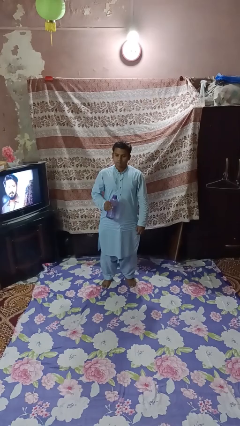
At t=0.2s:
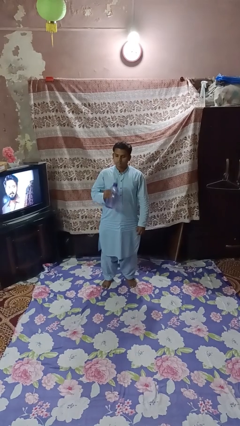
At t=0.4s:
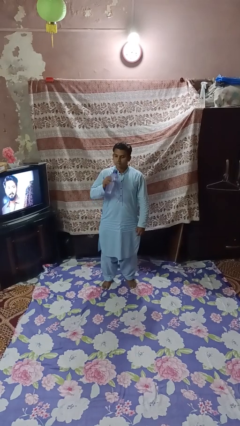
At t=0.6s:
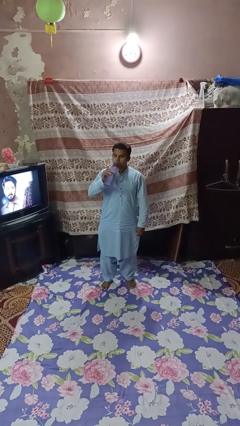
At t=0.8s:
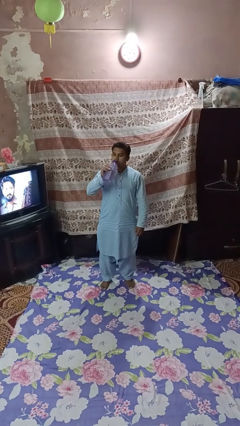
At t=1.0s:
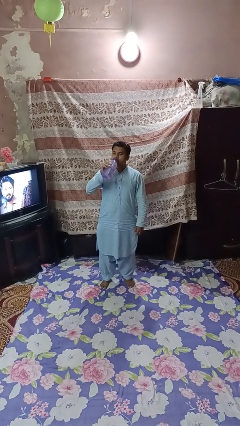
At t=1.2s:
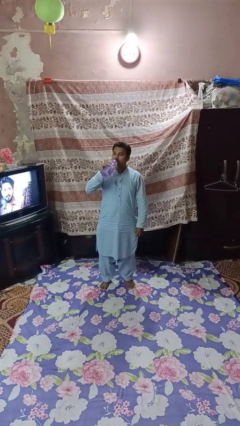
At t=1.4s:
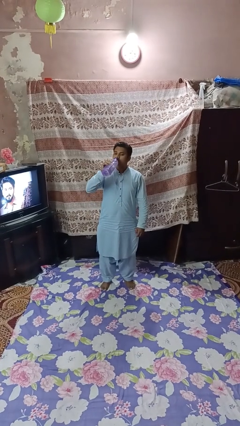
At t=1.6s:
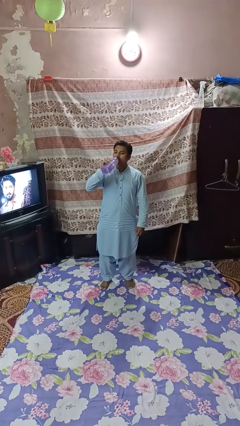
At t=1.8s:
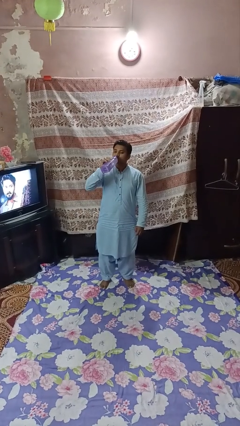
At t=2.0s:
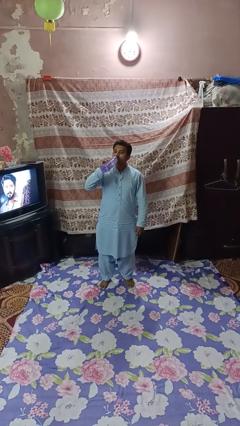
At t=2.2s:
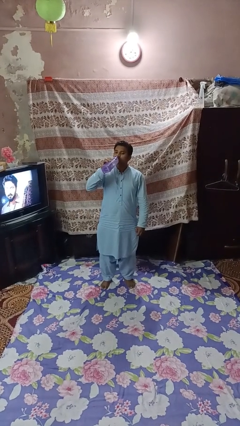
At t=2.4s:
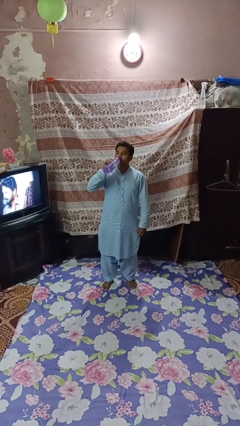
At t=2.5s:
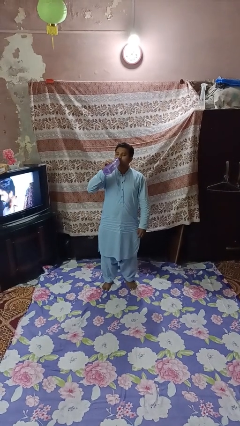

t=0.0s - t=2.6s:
person drinks from bottle

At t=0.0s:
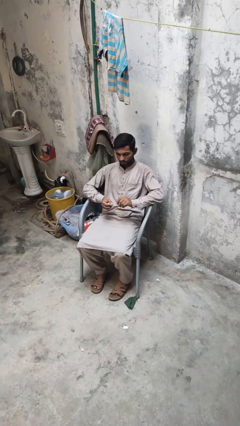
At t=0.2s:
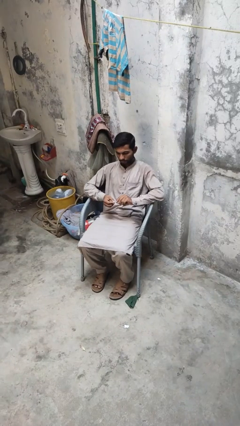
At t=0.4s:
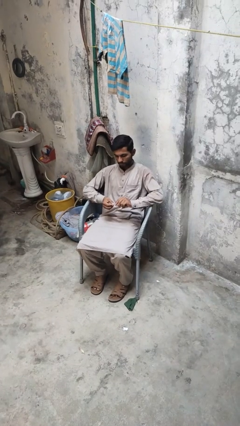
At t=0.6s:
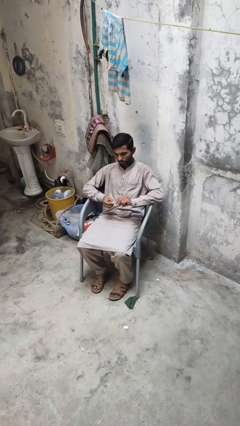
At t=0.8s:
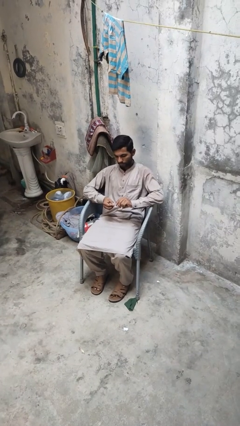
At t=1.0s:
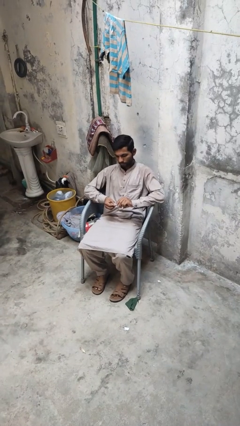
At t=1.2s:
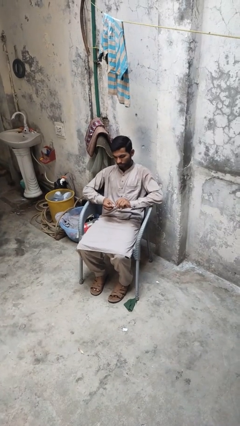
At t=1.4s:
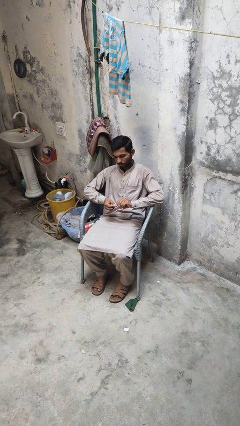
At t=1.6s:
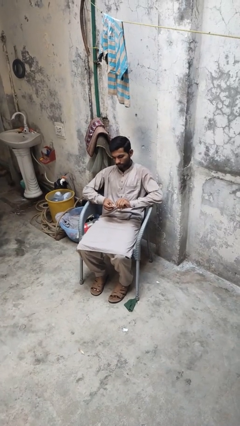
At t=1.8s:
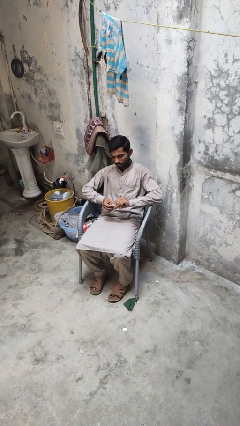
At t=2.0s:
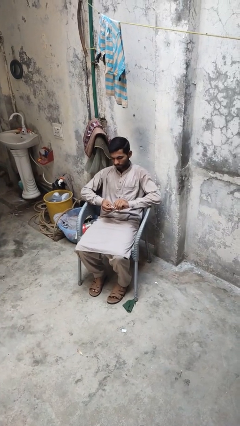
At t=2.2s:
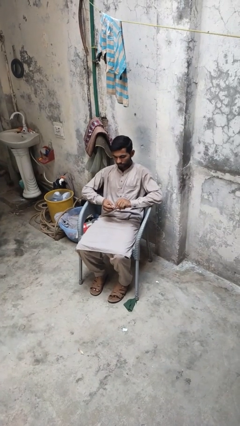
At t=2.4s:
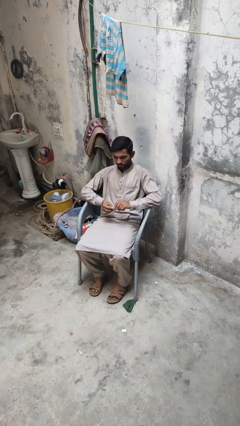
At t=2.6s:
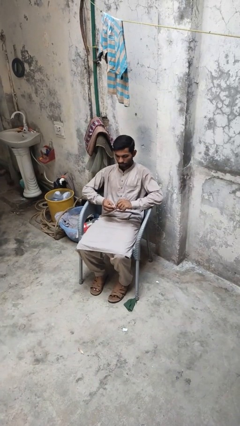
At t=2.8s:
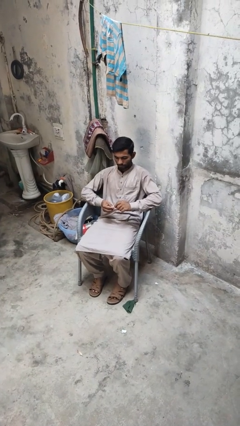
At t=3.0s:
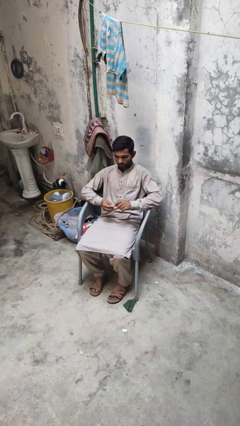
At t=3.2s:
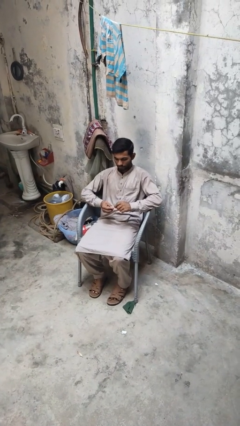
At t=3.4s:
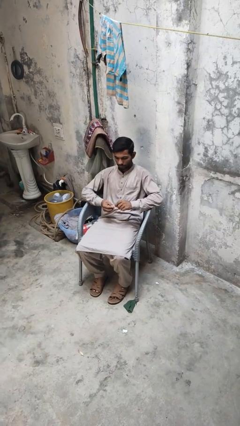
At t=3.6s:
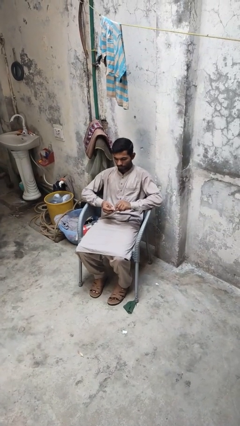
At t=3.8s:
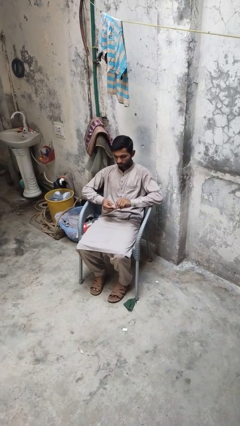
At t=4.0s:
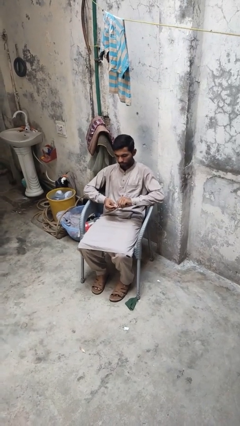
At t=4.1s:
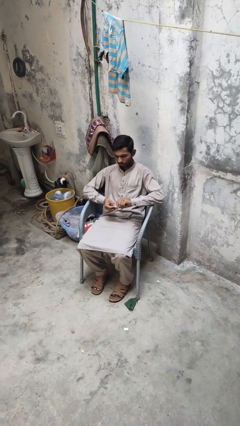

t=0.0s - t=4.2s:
person files fingernails

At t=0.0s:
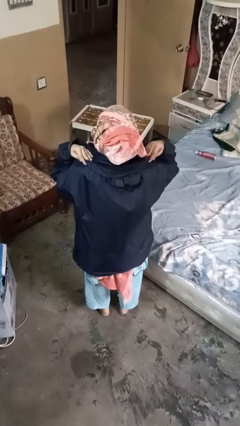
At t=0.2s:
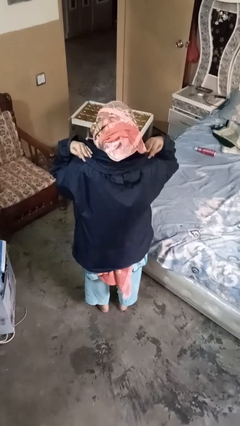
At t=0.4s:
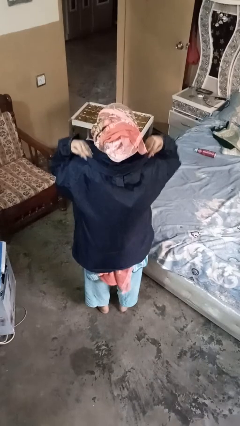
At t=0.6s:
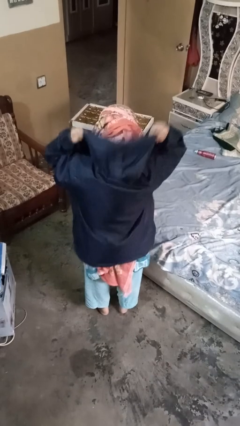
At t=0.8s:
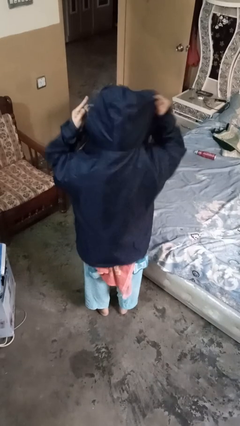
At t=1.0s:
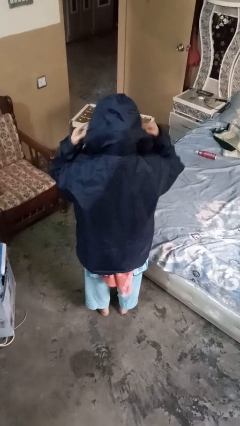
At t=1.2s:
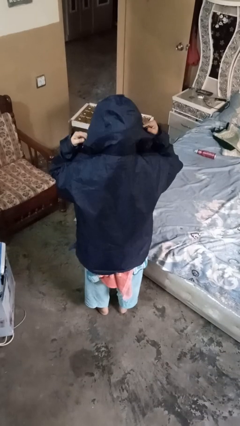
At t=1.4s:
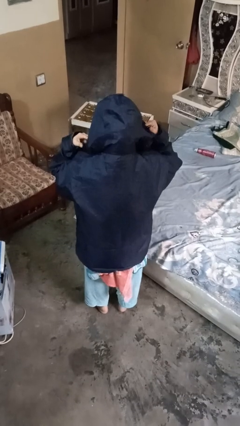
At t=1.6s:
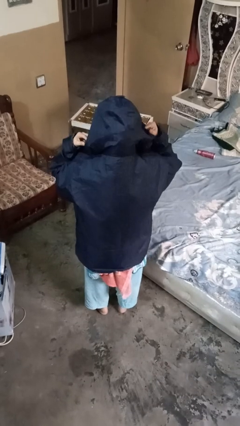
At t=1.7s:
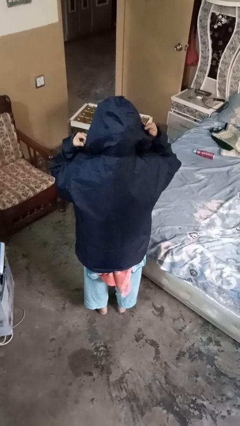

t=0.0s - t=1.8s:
person puts on hoodie

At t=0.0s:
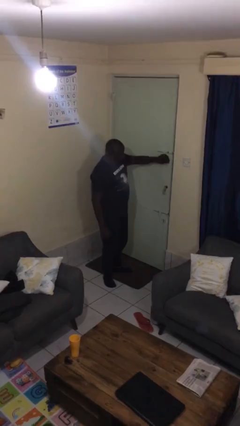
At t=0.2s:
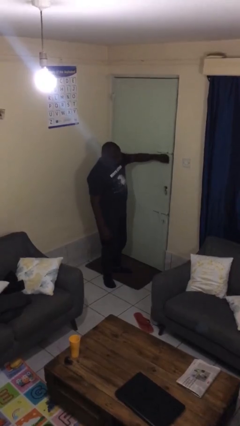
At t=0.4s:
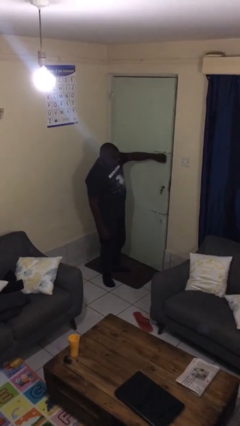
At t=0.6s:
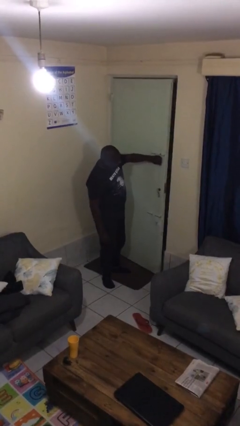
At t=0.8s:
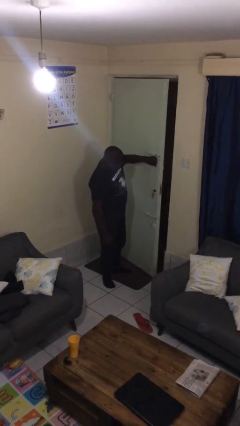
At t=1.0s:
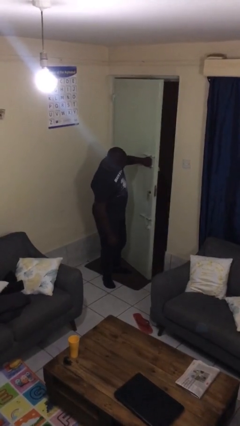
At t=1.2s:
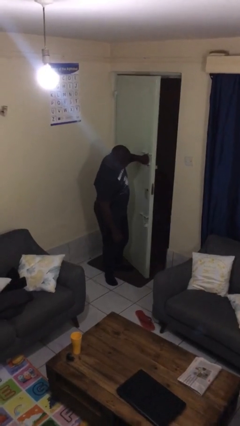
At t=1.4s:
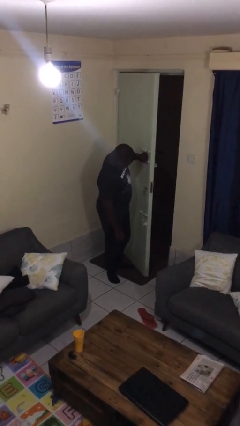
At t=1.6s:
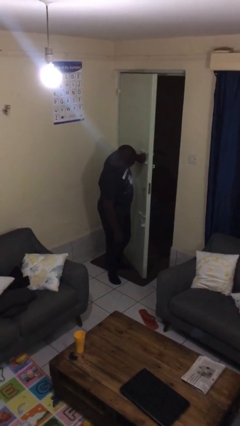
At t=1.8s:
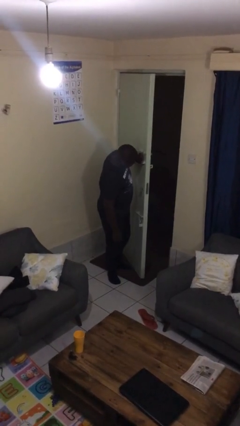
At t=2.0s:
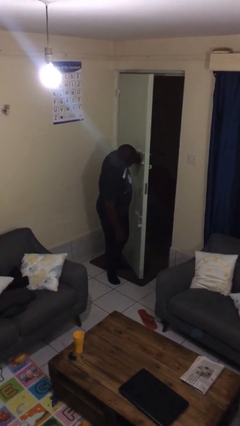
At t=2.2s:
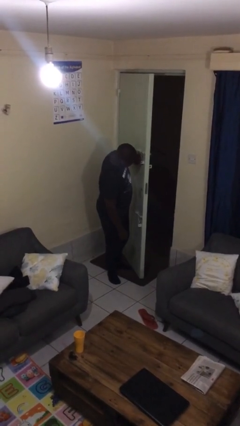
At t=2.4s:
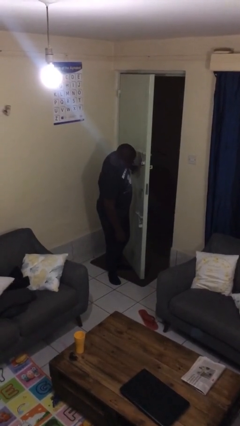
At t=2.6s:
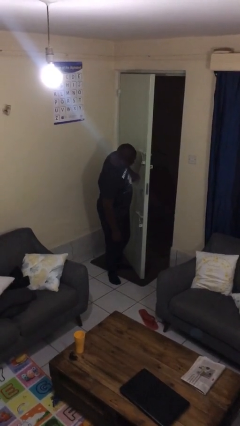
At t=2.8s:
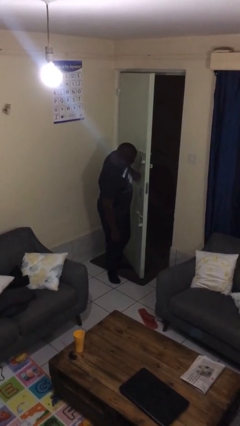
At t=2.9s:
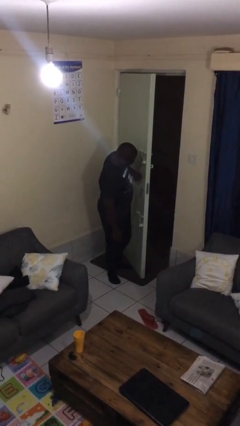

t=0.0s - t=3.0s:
person opens facility door

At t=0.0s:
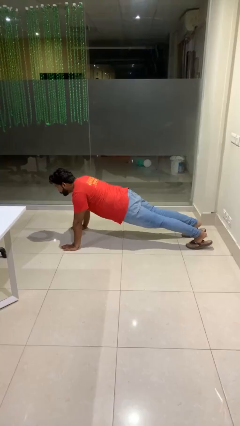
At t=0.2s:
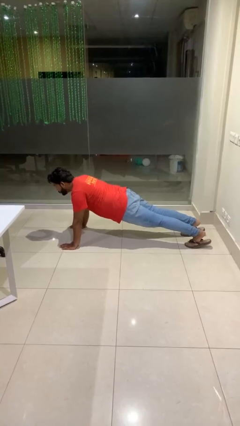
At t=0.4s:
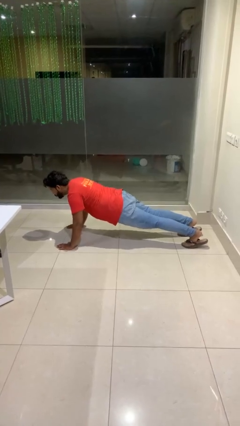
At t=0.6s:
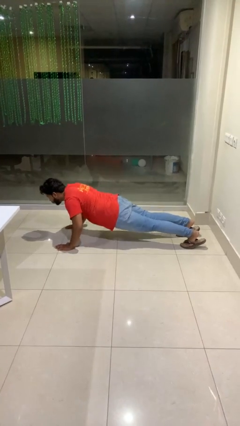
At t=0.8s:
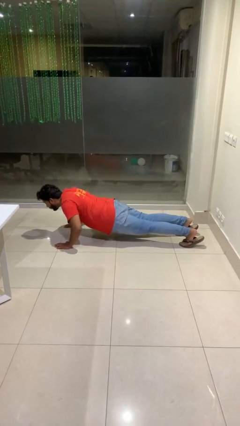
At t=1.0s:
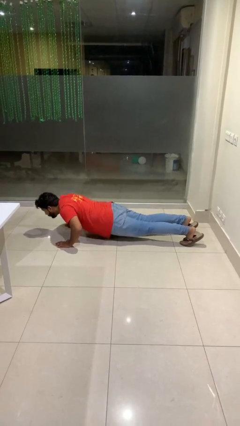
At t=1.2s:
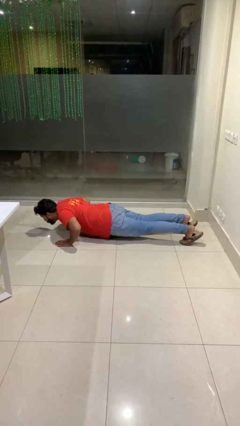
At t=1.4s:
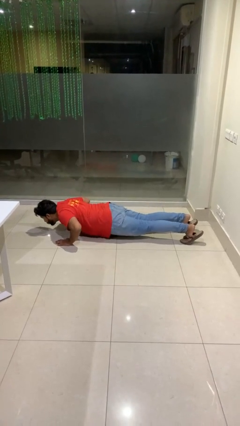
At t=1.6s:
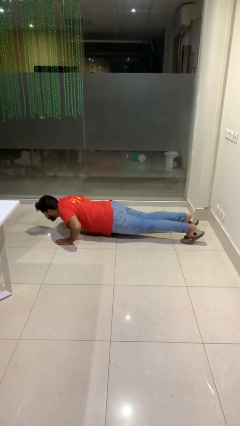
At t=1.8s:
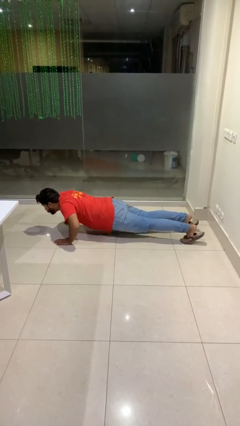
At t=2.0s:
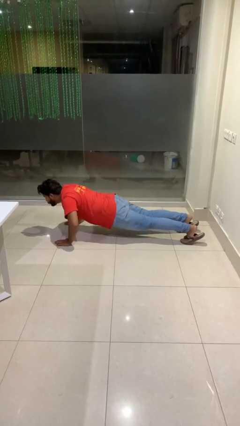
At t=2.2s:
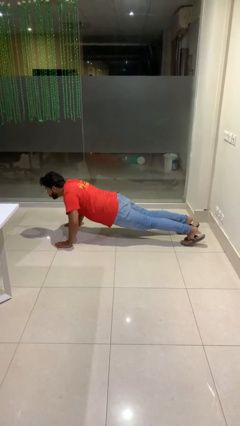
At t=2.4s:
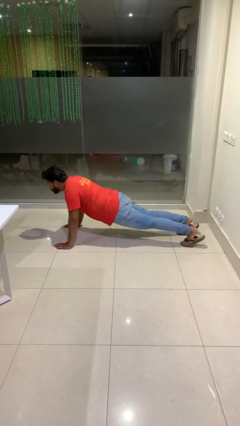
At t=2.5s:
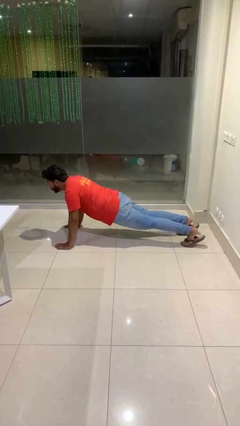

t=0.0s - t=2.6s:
person exercises with pushup

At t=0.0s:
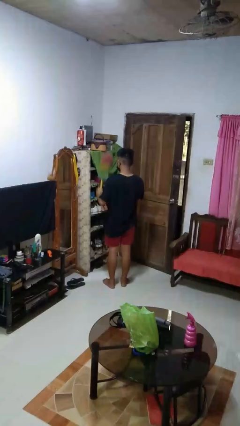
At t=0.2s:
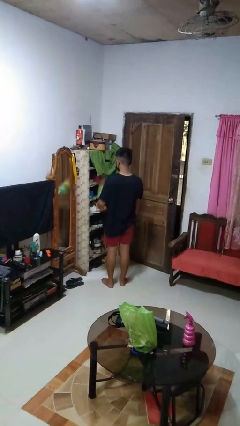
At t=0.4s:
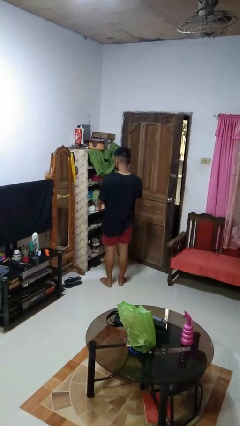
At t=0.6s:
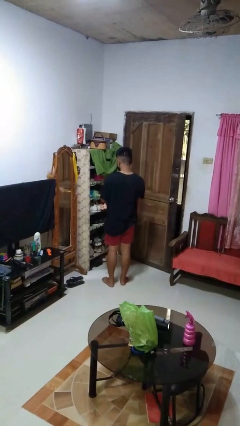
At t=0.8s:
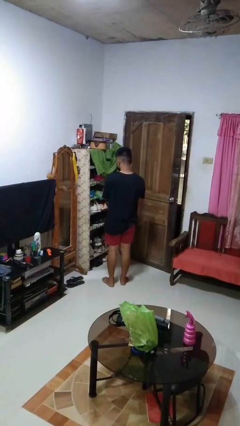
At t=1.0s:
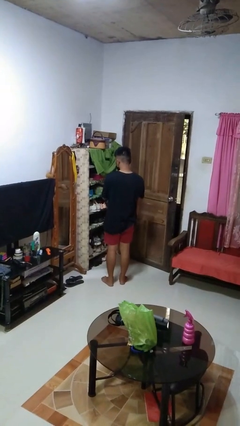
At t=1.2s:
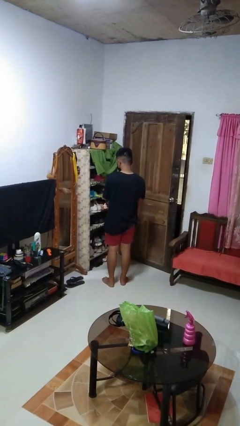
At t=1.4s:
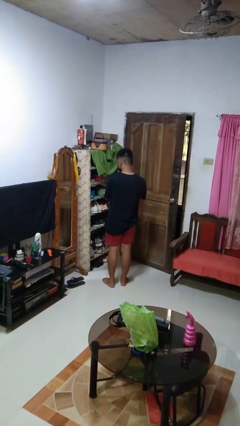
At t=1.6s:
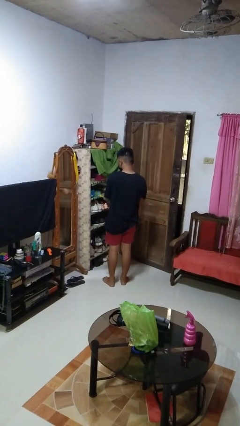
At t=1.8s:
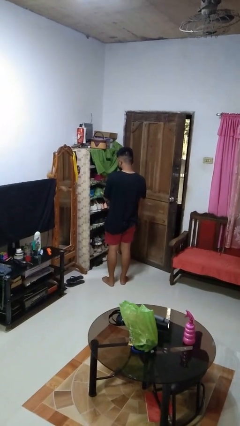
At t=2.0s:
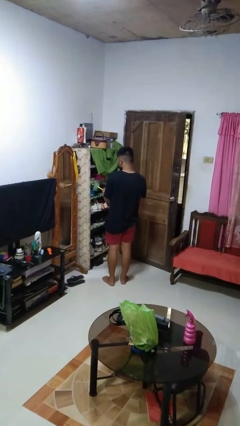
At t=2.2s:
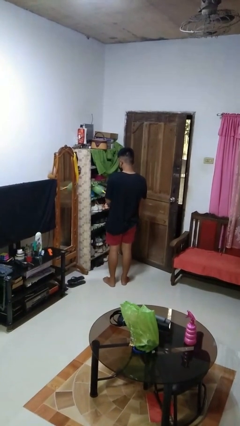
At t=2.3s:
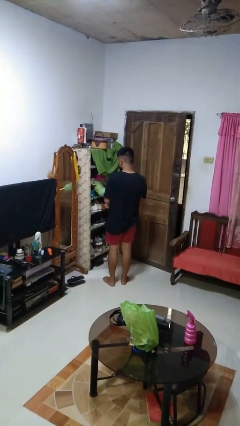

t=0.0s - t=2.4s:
person dusts furniture

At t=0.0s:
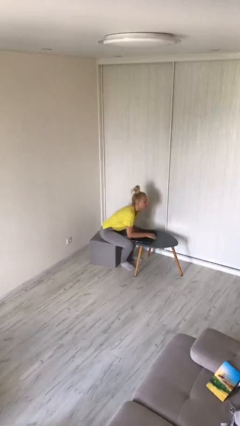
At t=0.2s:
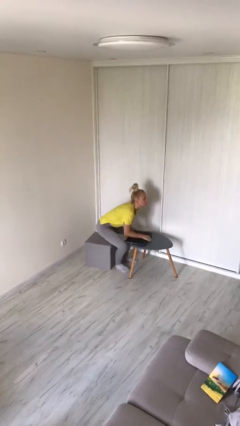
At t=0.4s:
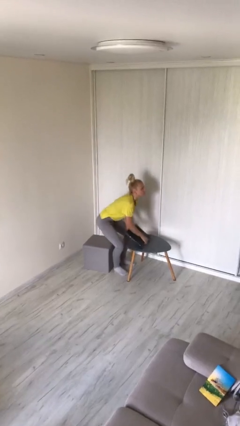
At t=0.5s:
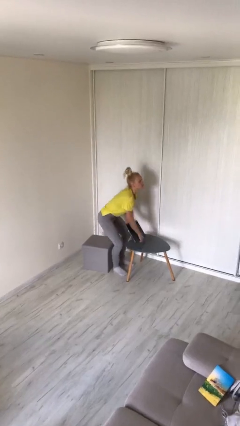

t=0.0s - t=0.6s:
person stands up
